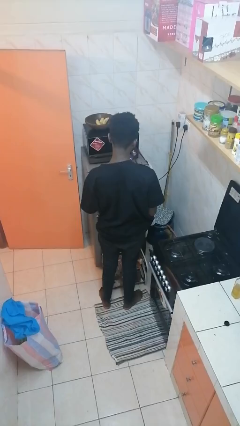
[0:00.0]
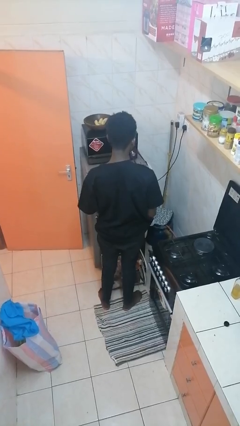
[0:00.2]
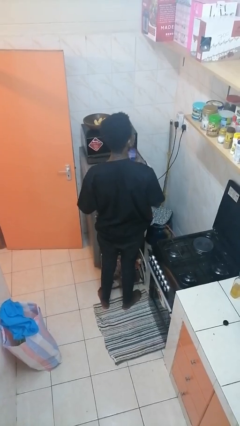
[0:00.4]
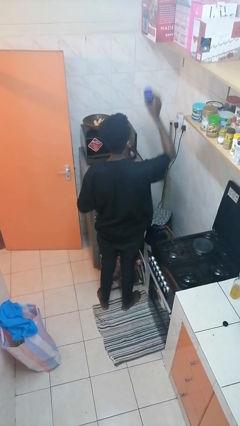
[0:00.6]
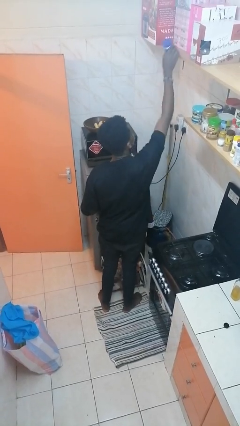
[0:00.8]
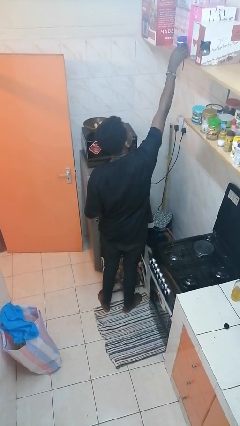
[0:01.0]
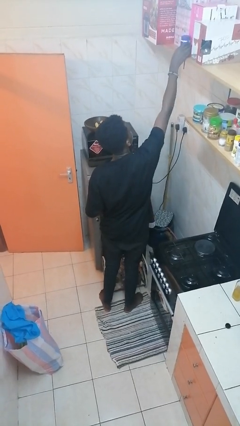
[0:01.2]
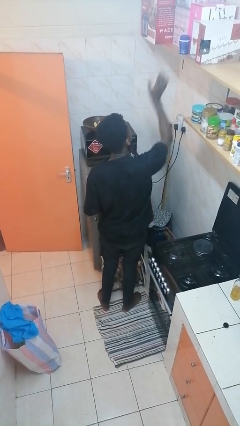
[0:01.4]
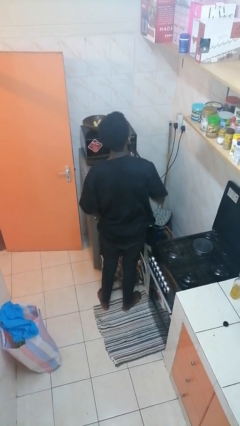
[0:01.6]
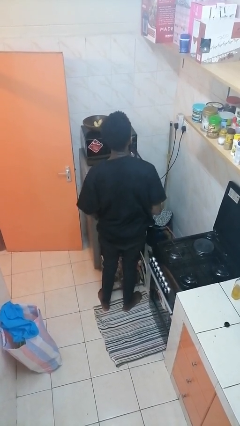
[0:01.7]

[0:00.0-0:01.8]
person puts down object on shelf

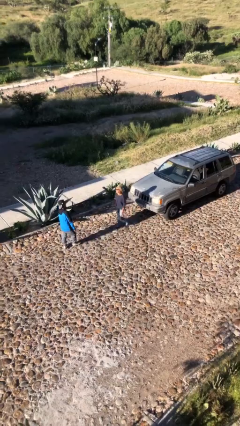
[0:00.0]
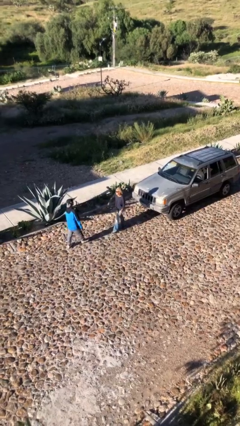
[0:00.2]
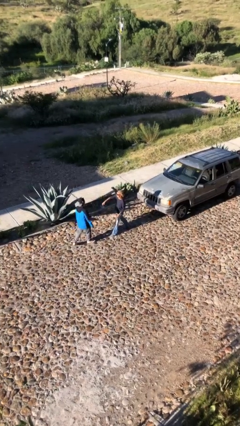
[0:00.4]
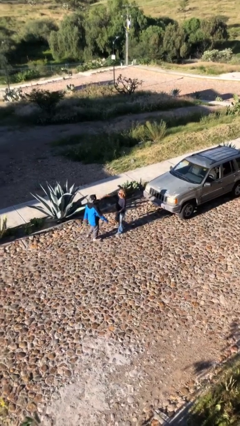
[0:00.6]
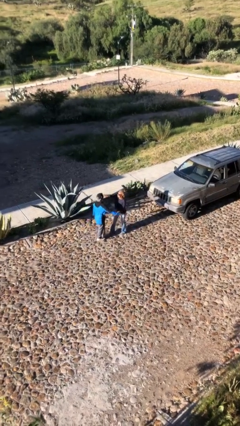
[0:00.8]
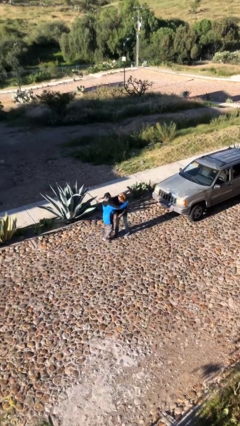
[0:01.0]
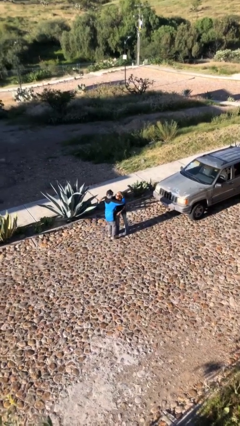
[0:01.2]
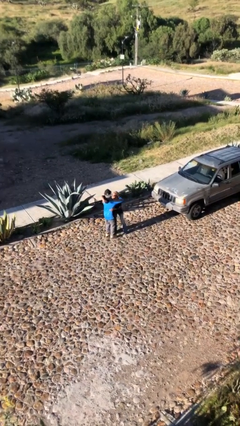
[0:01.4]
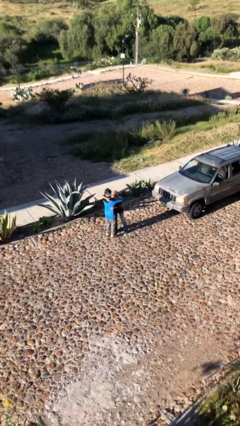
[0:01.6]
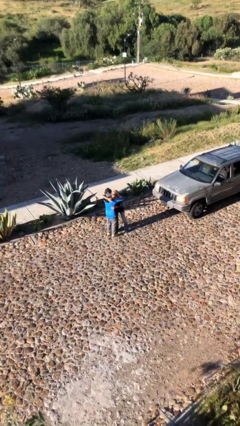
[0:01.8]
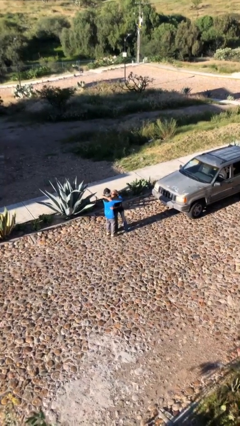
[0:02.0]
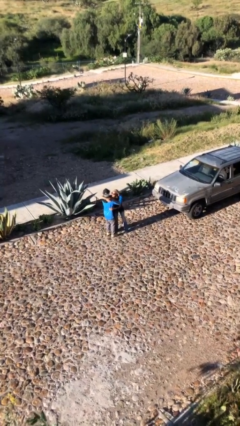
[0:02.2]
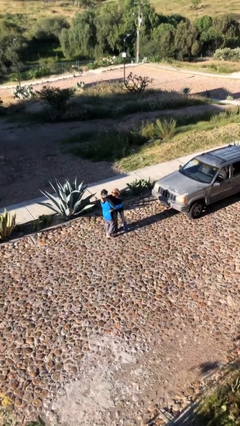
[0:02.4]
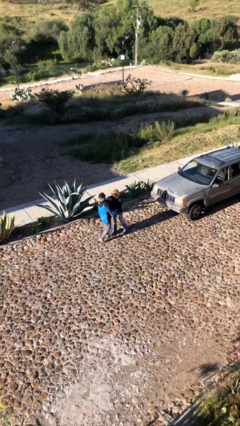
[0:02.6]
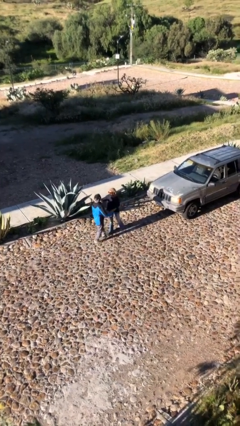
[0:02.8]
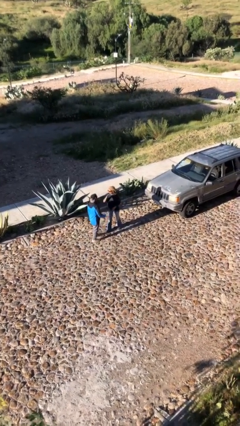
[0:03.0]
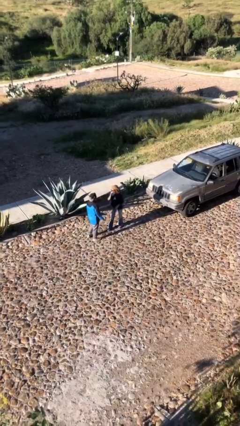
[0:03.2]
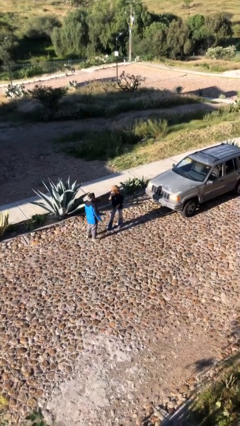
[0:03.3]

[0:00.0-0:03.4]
person embraces person

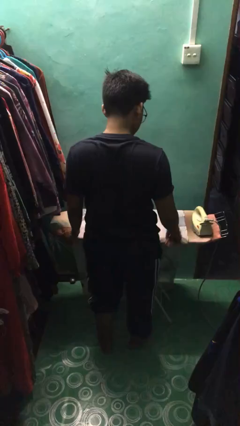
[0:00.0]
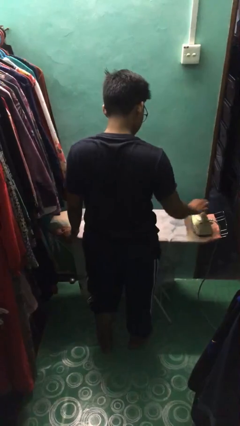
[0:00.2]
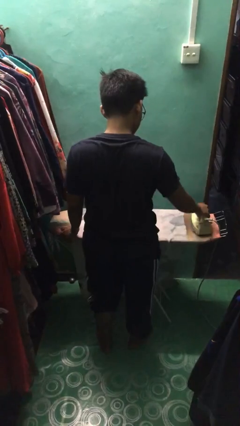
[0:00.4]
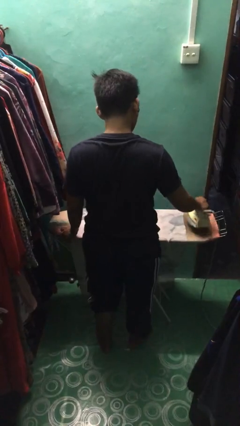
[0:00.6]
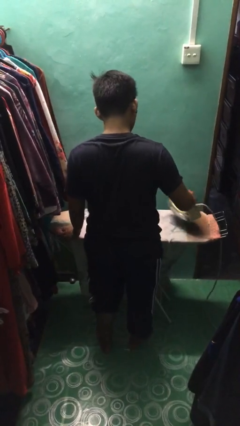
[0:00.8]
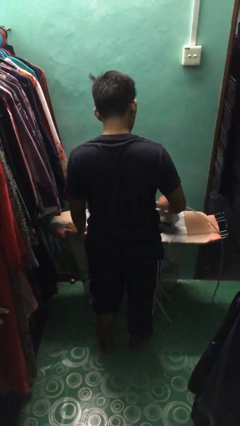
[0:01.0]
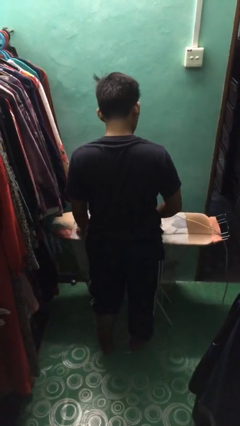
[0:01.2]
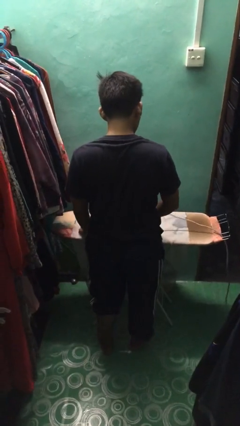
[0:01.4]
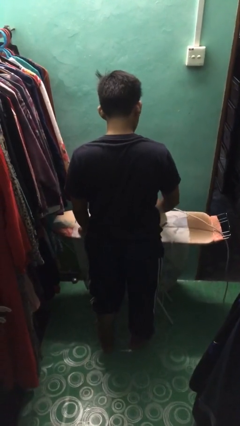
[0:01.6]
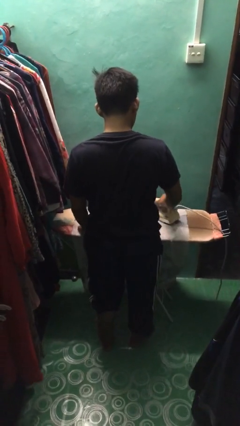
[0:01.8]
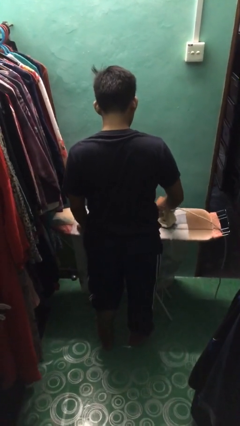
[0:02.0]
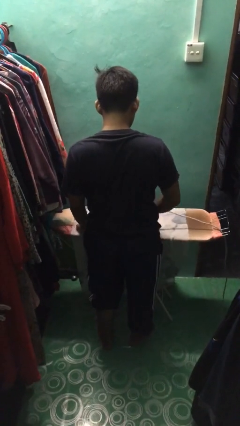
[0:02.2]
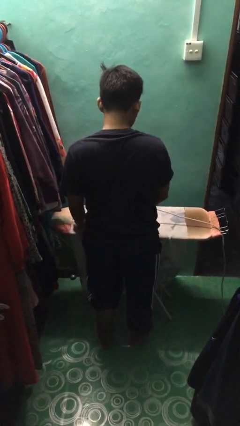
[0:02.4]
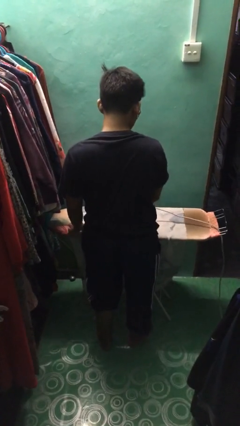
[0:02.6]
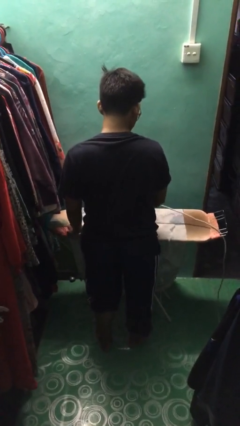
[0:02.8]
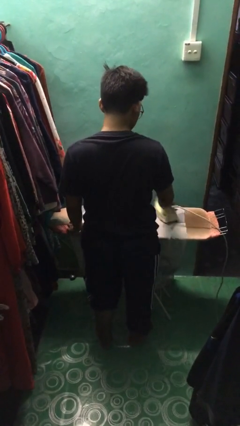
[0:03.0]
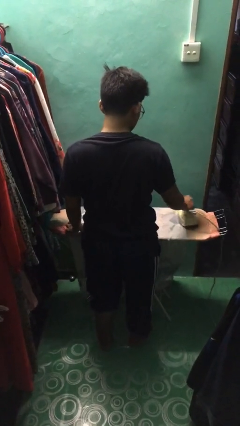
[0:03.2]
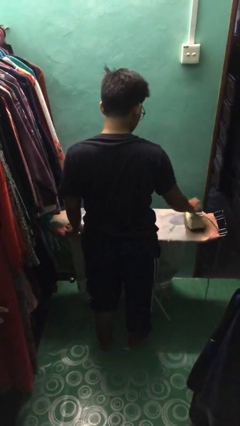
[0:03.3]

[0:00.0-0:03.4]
person irons clothes

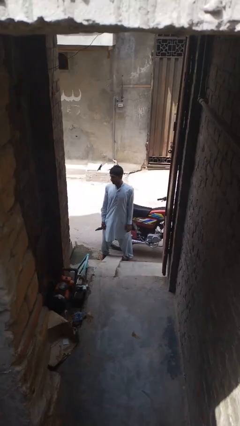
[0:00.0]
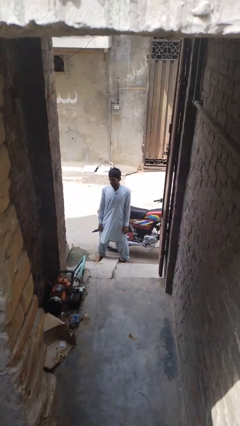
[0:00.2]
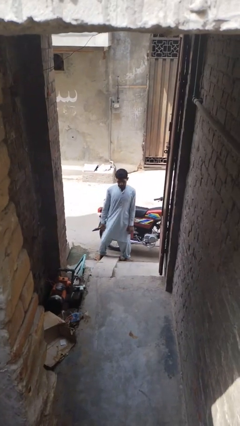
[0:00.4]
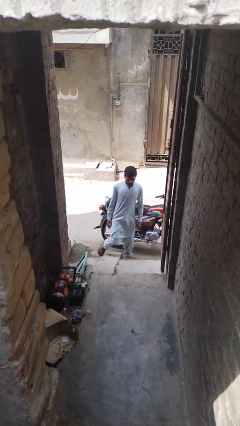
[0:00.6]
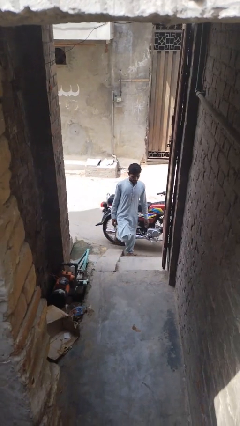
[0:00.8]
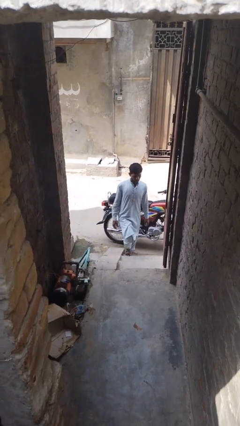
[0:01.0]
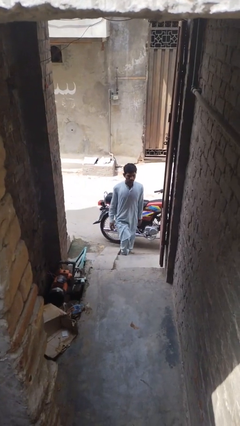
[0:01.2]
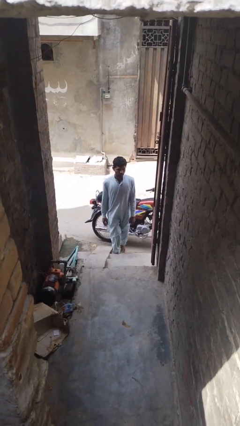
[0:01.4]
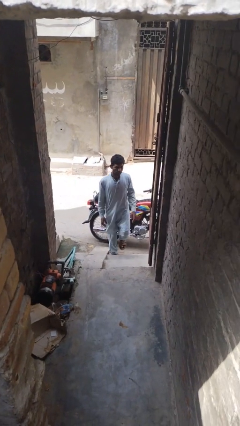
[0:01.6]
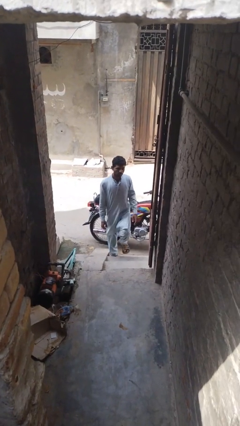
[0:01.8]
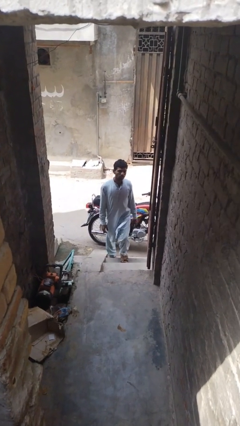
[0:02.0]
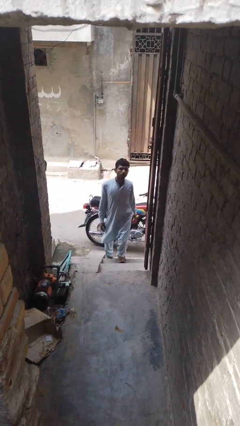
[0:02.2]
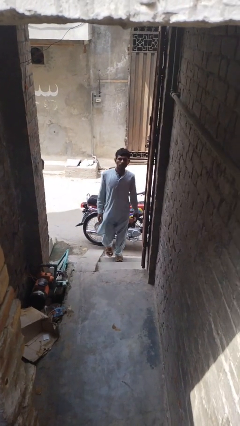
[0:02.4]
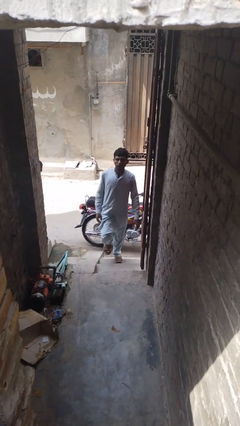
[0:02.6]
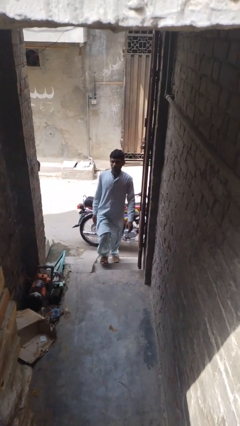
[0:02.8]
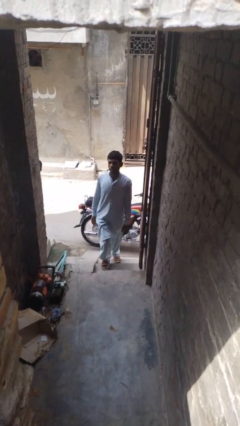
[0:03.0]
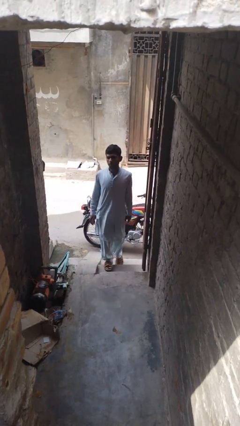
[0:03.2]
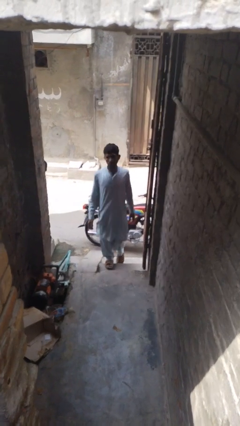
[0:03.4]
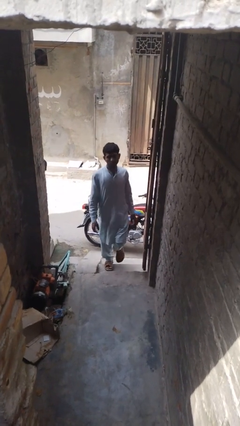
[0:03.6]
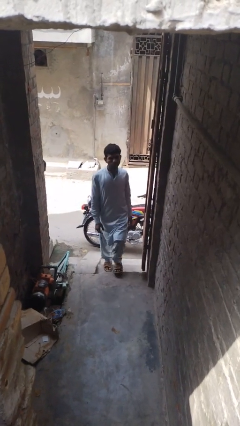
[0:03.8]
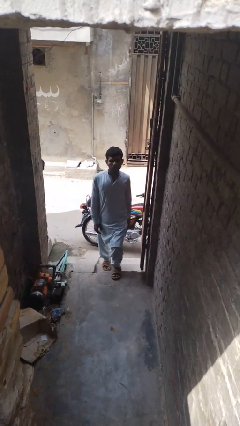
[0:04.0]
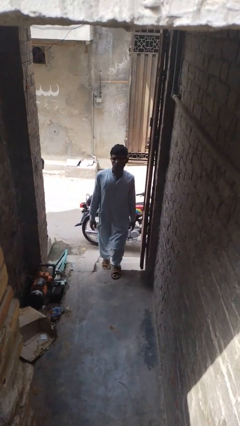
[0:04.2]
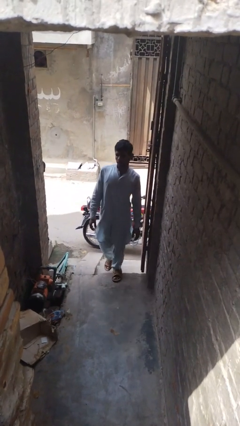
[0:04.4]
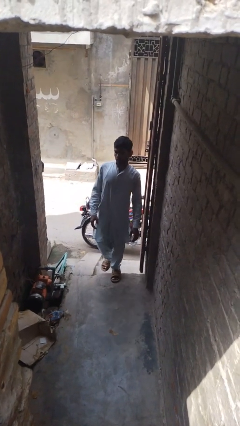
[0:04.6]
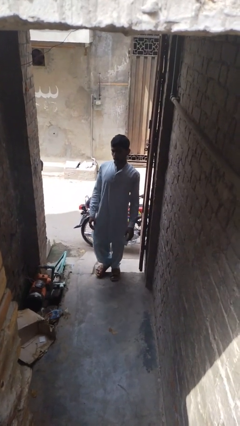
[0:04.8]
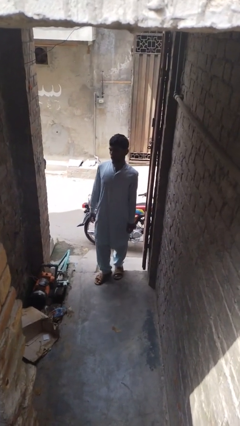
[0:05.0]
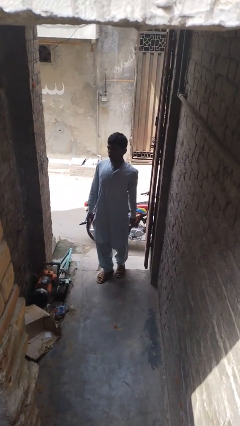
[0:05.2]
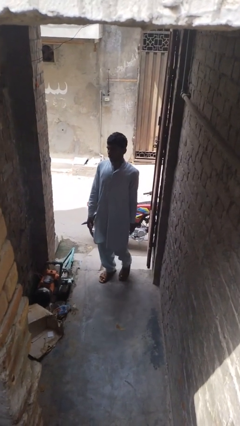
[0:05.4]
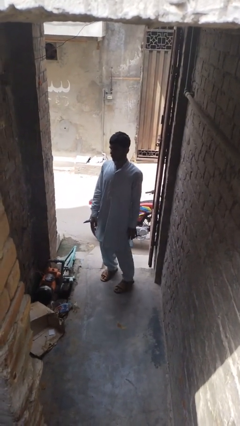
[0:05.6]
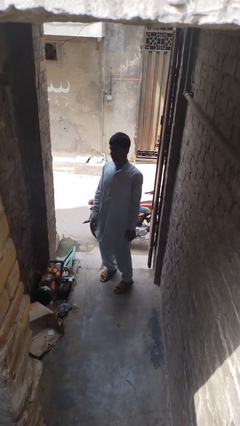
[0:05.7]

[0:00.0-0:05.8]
person climbs up stairs

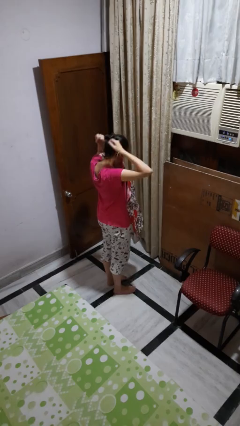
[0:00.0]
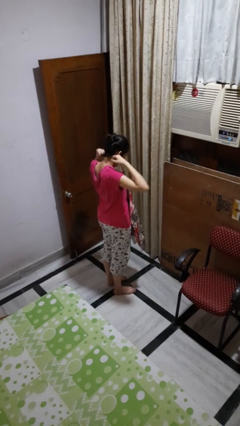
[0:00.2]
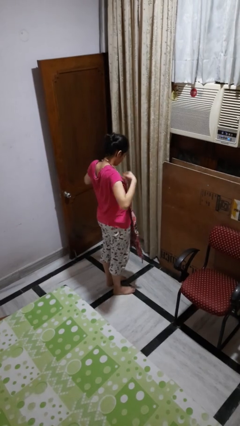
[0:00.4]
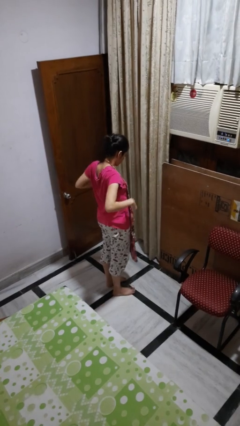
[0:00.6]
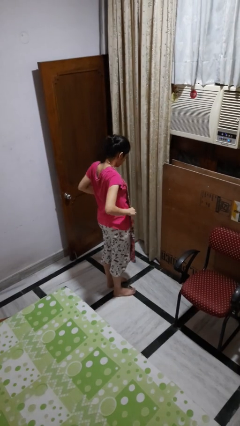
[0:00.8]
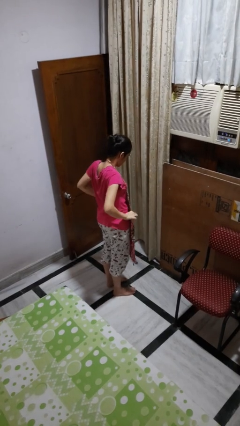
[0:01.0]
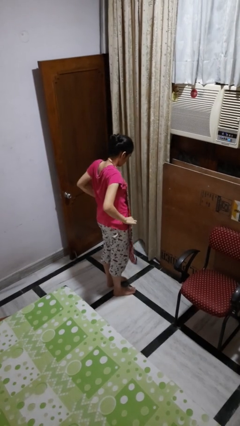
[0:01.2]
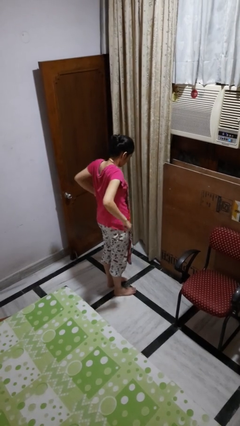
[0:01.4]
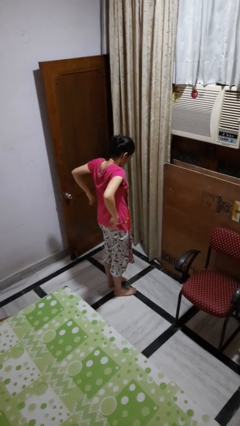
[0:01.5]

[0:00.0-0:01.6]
person puts on apron

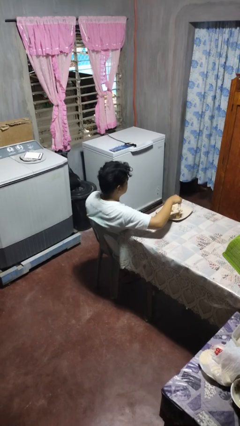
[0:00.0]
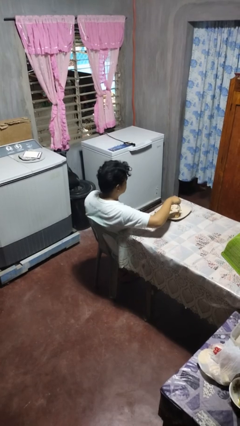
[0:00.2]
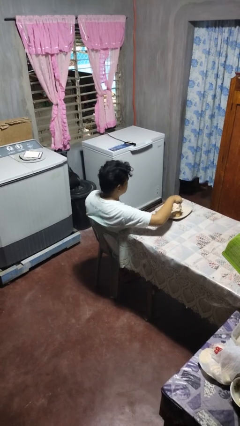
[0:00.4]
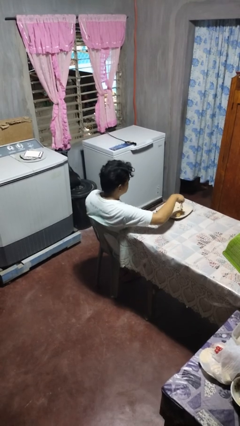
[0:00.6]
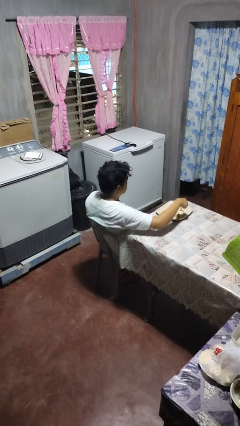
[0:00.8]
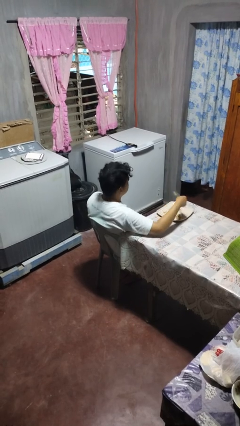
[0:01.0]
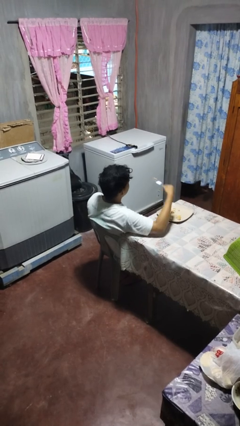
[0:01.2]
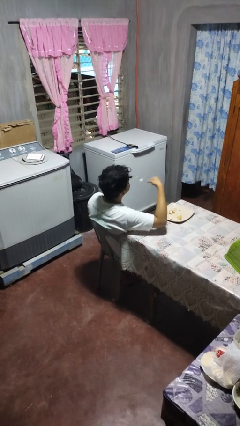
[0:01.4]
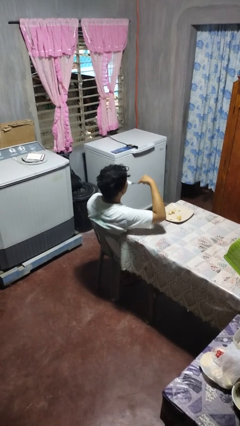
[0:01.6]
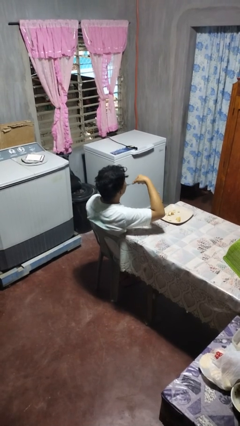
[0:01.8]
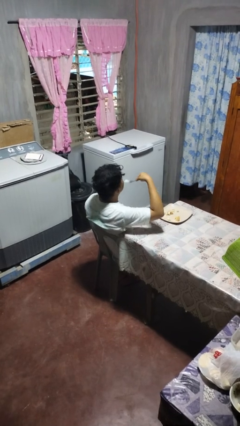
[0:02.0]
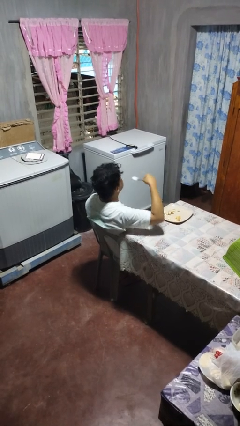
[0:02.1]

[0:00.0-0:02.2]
person eats with utensil
